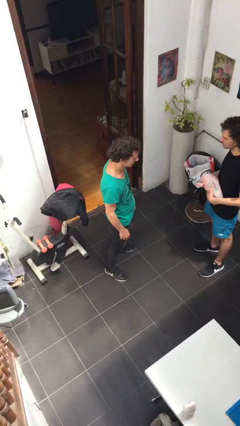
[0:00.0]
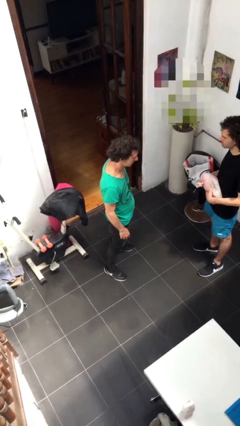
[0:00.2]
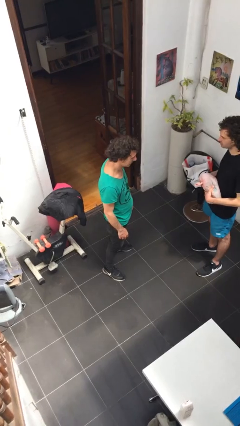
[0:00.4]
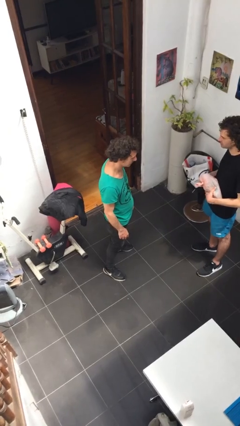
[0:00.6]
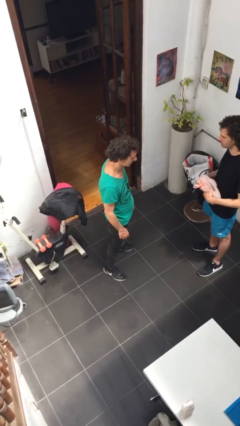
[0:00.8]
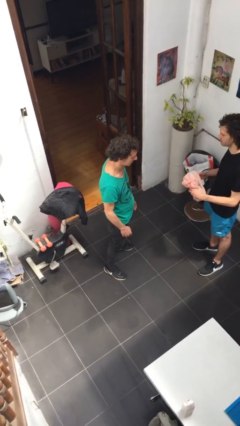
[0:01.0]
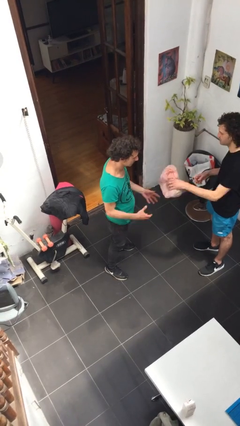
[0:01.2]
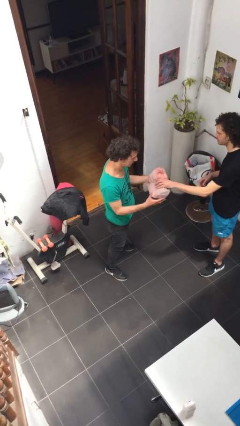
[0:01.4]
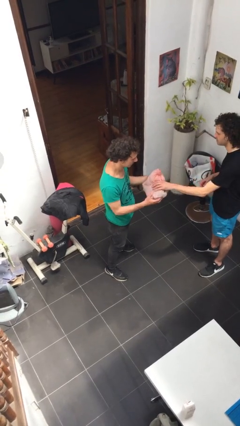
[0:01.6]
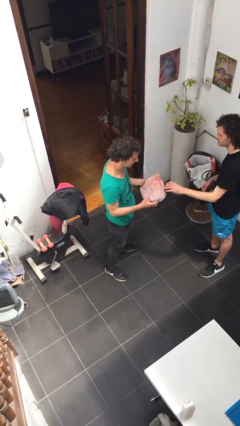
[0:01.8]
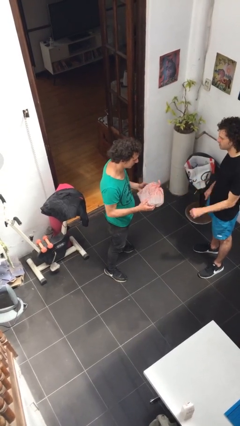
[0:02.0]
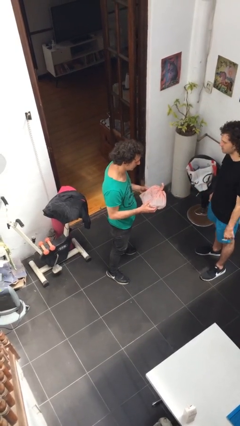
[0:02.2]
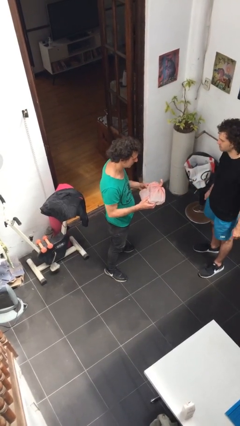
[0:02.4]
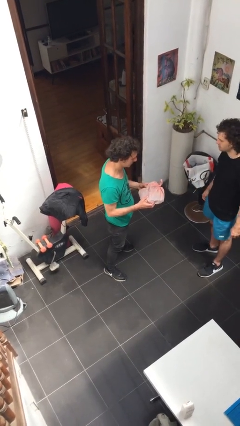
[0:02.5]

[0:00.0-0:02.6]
person transfers object to person

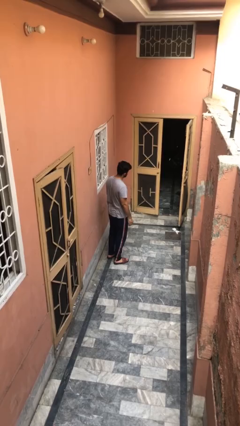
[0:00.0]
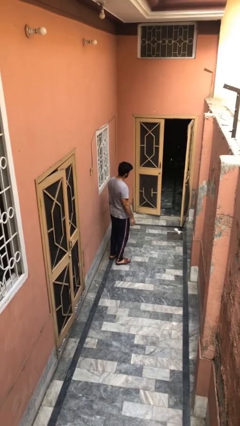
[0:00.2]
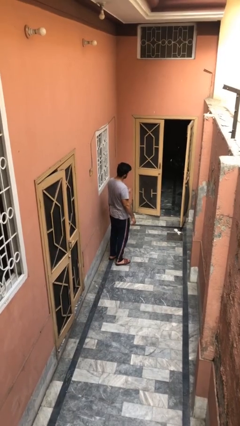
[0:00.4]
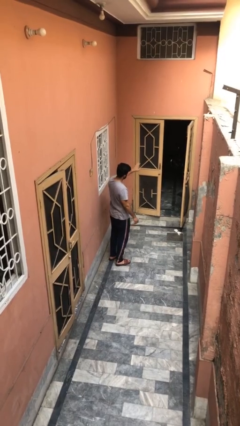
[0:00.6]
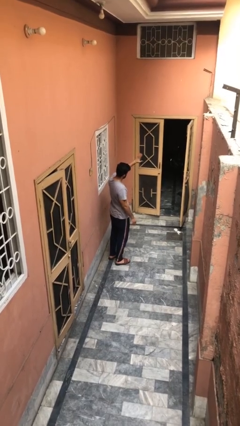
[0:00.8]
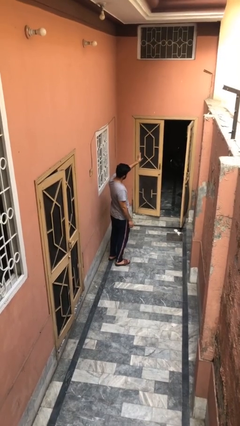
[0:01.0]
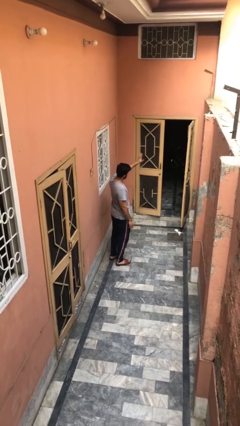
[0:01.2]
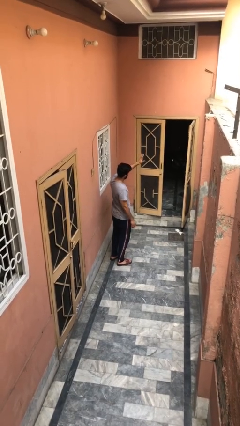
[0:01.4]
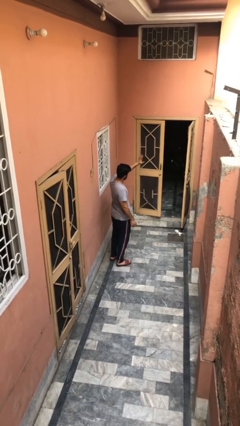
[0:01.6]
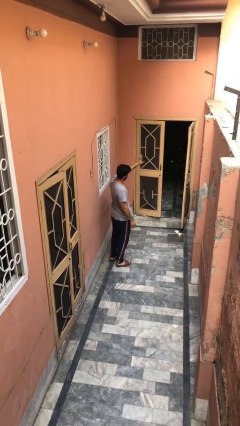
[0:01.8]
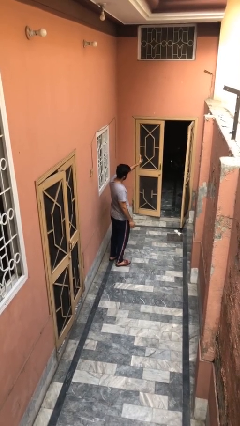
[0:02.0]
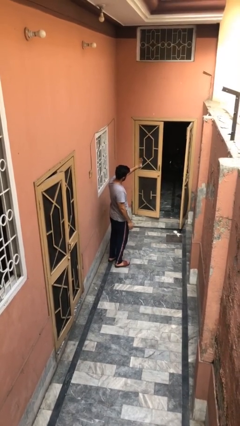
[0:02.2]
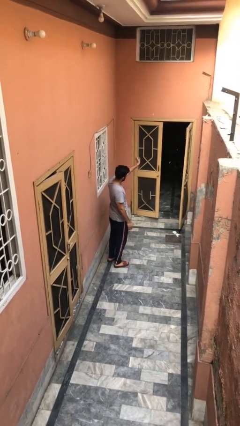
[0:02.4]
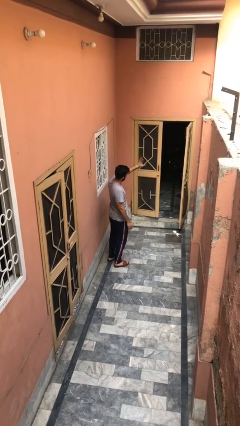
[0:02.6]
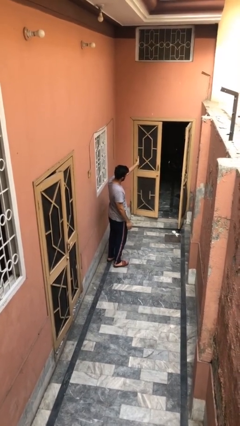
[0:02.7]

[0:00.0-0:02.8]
person waves at person

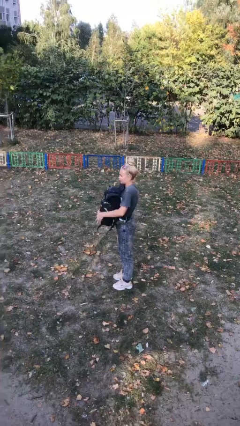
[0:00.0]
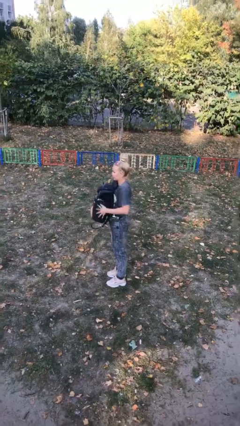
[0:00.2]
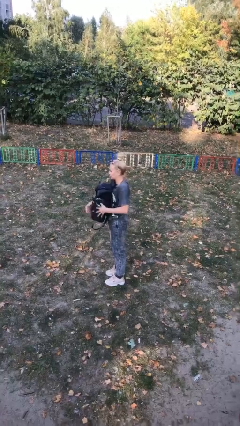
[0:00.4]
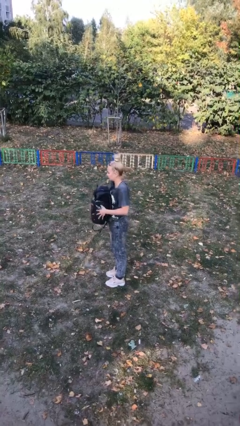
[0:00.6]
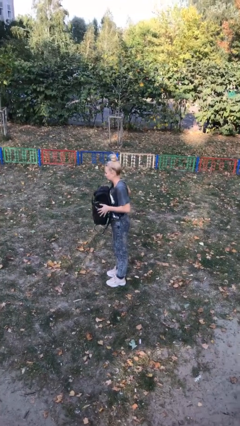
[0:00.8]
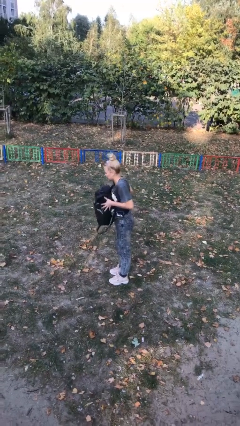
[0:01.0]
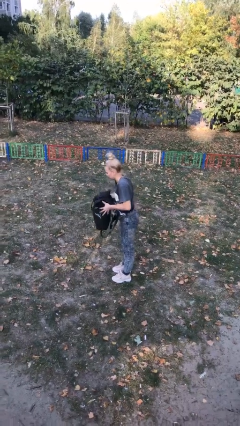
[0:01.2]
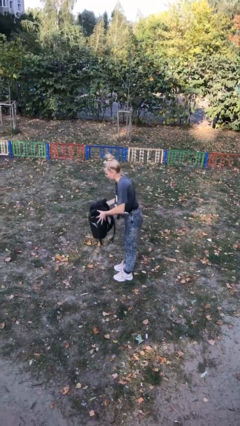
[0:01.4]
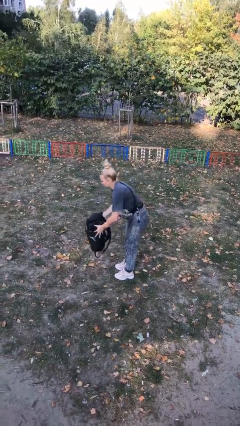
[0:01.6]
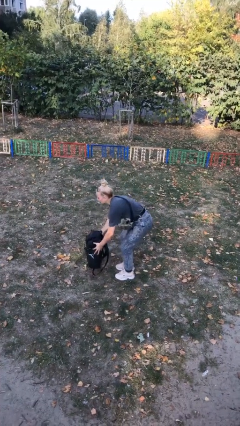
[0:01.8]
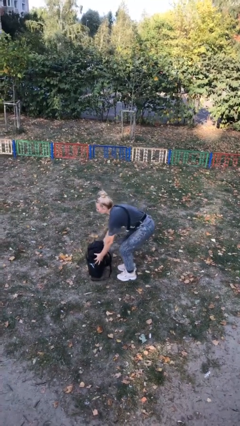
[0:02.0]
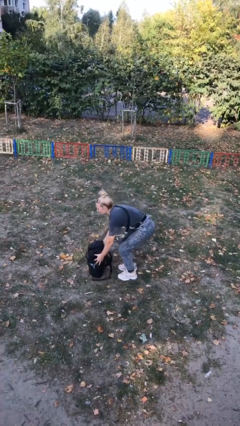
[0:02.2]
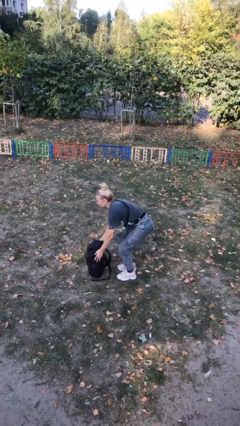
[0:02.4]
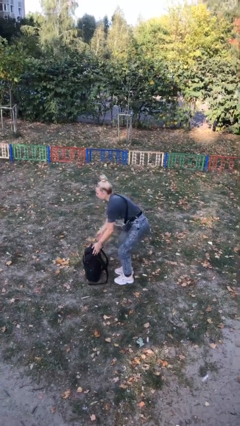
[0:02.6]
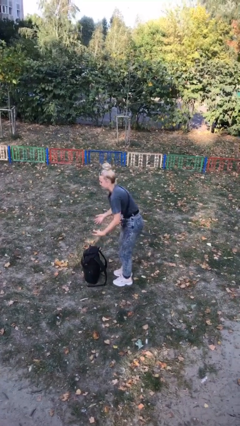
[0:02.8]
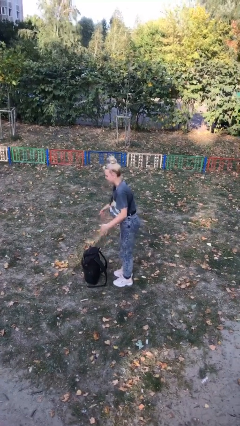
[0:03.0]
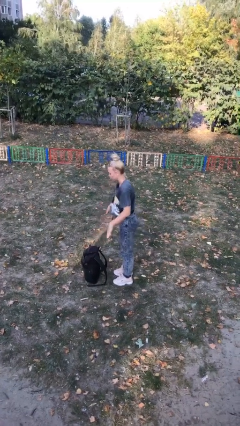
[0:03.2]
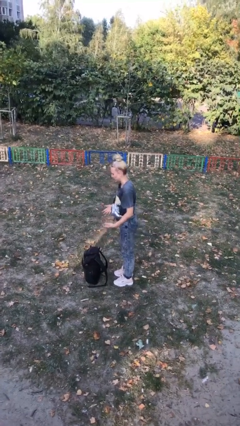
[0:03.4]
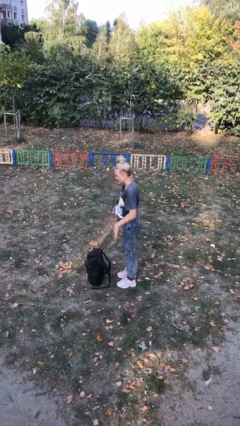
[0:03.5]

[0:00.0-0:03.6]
person puts down object on floor

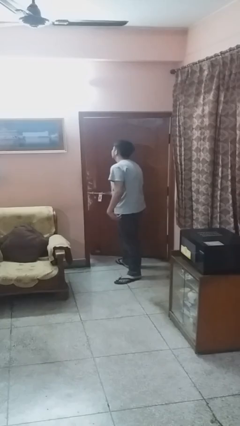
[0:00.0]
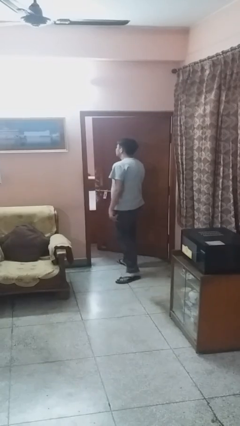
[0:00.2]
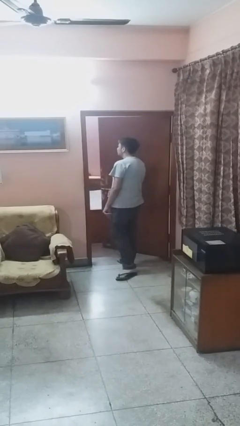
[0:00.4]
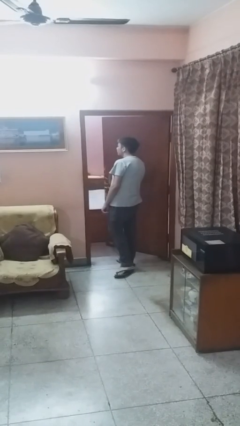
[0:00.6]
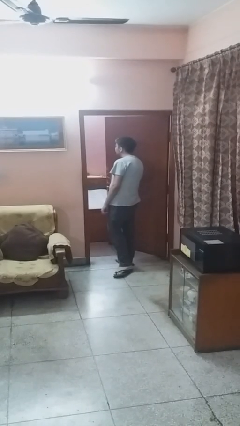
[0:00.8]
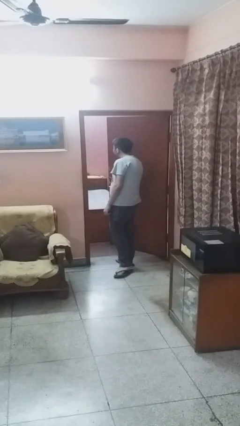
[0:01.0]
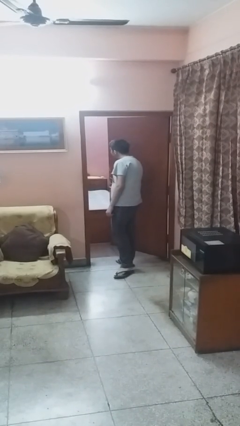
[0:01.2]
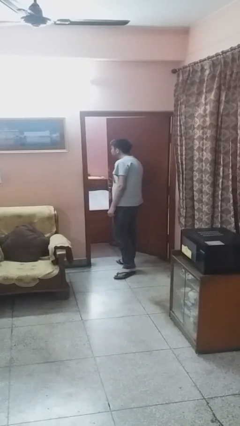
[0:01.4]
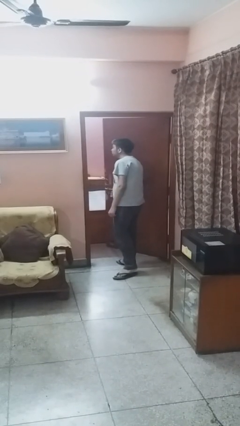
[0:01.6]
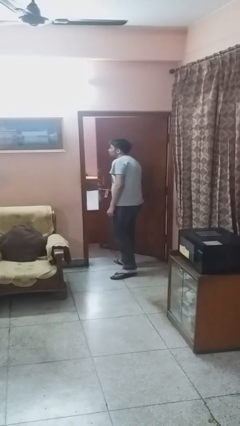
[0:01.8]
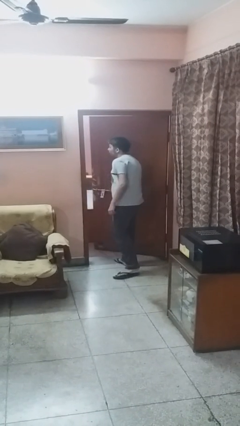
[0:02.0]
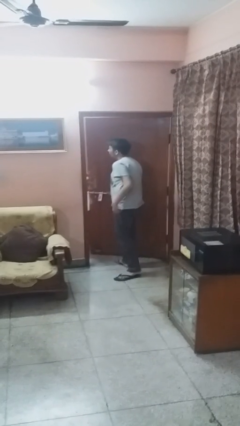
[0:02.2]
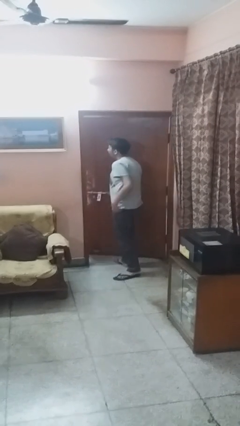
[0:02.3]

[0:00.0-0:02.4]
person opens facility door

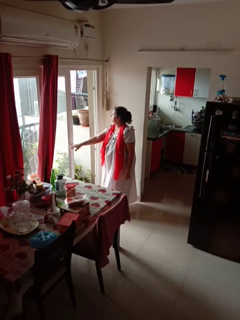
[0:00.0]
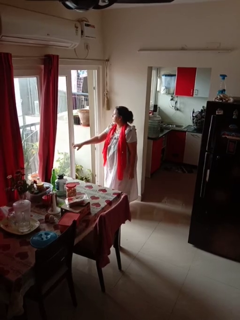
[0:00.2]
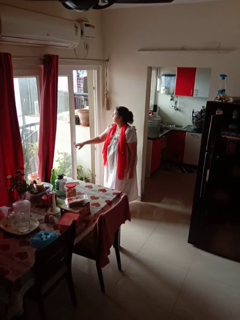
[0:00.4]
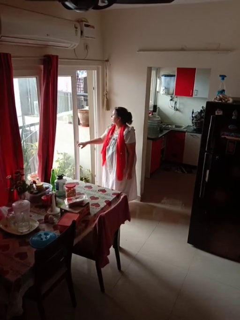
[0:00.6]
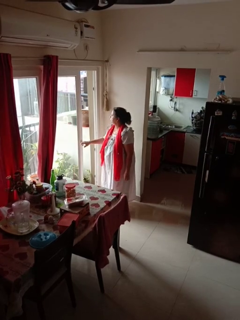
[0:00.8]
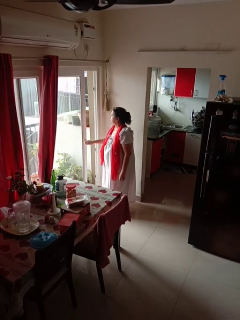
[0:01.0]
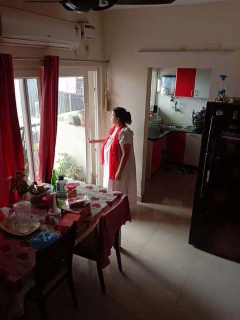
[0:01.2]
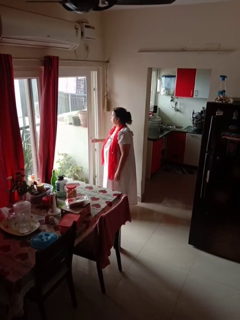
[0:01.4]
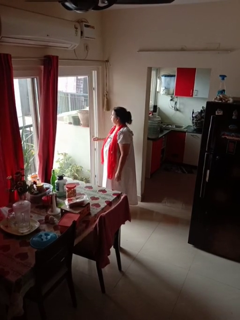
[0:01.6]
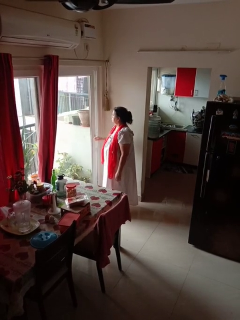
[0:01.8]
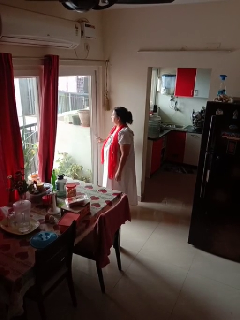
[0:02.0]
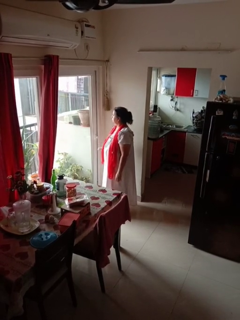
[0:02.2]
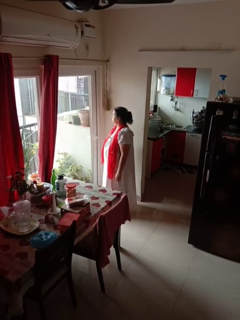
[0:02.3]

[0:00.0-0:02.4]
person closes sliding door

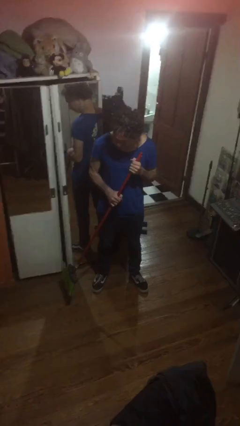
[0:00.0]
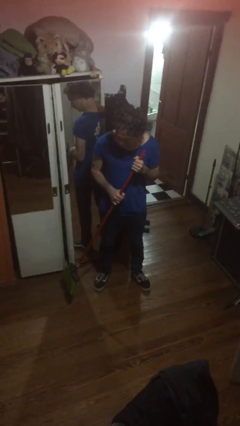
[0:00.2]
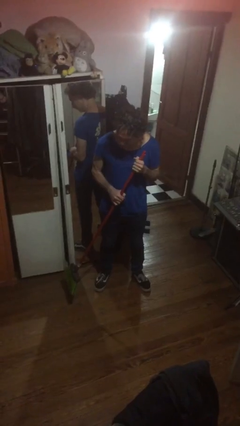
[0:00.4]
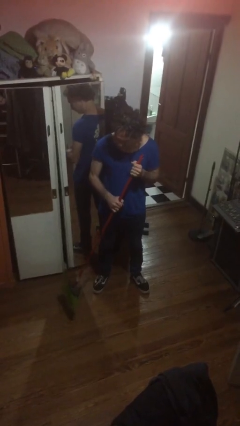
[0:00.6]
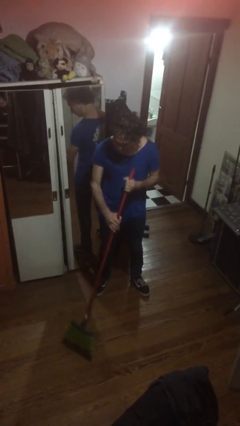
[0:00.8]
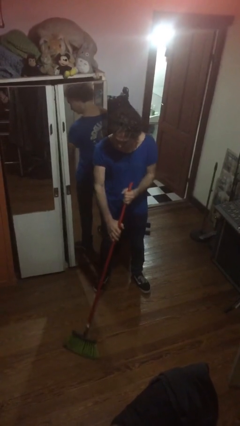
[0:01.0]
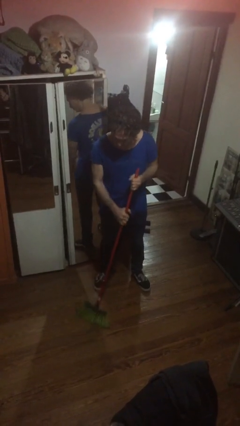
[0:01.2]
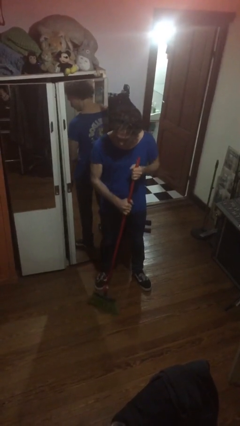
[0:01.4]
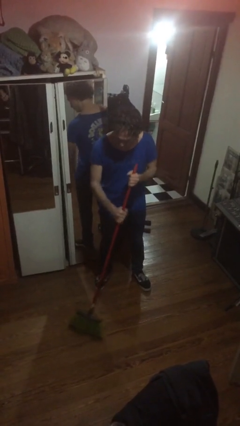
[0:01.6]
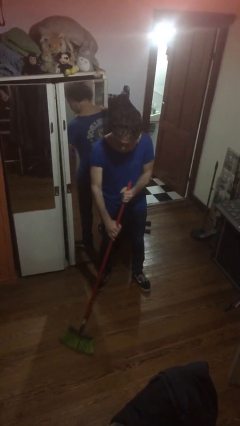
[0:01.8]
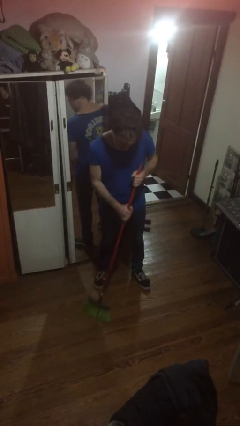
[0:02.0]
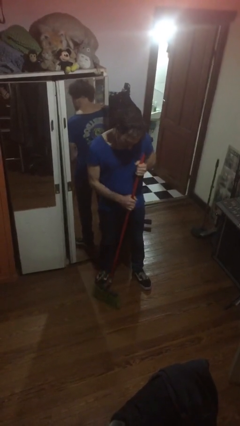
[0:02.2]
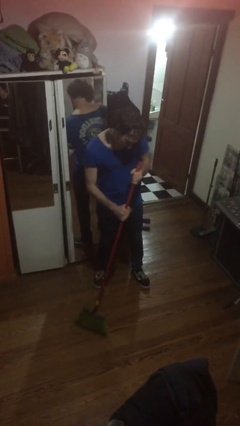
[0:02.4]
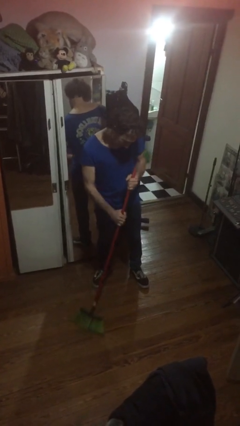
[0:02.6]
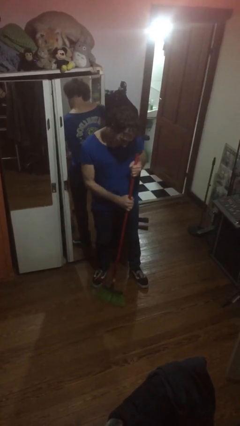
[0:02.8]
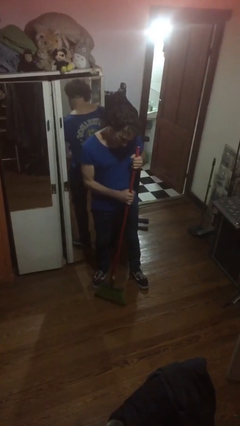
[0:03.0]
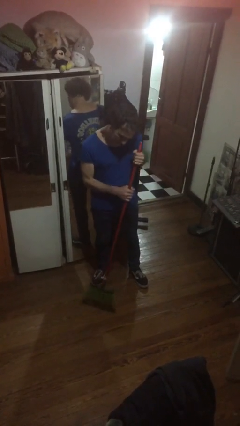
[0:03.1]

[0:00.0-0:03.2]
person sweeps floor

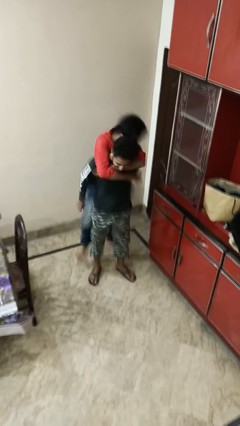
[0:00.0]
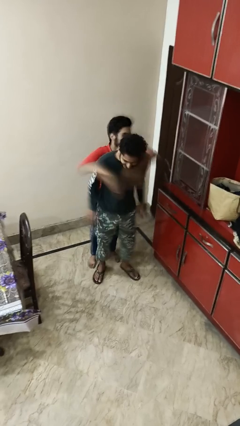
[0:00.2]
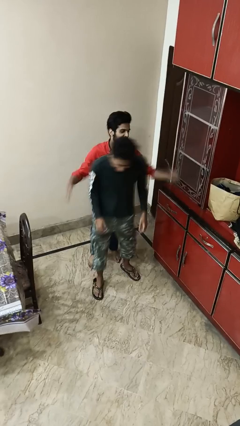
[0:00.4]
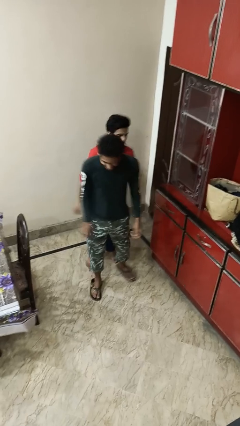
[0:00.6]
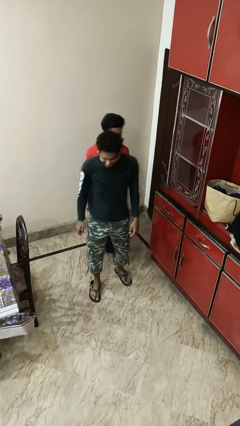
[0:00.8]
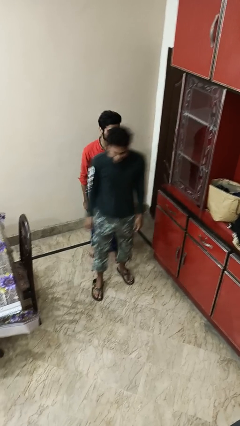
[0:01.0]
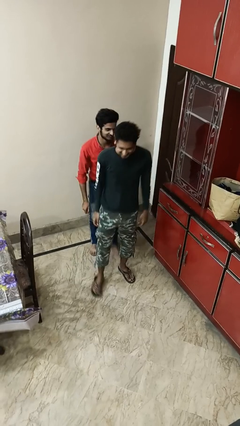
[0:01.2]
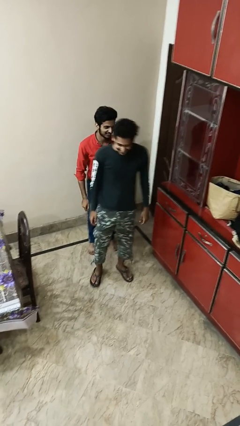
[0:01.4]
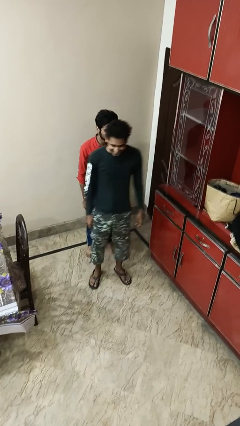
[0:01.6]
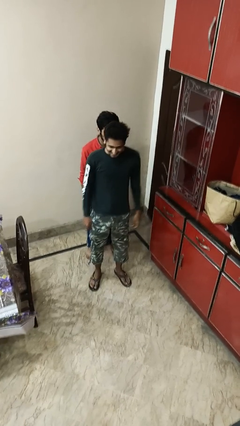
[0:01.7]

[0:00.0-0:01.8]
person puts down person
